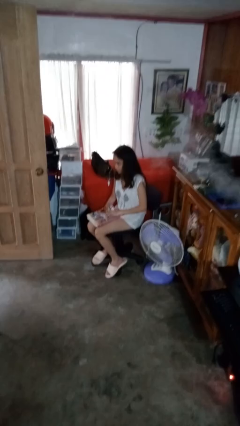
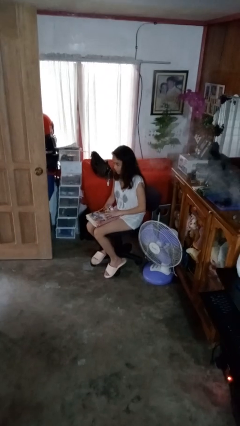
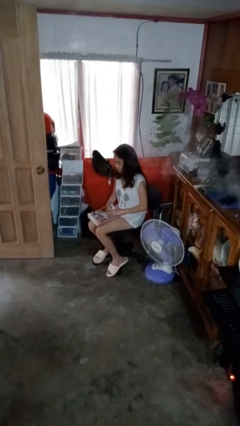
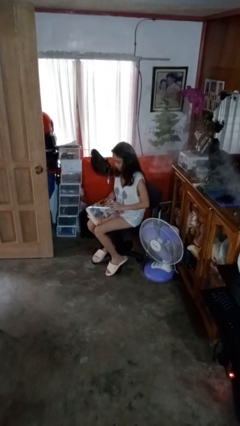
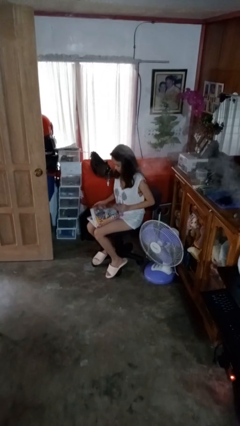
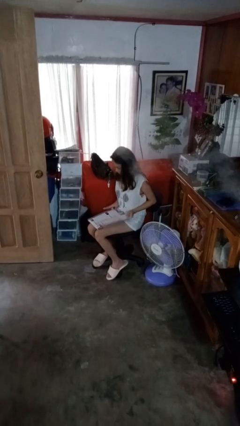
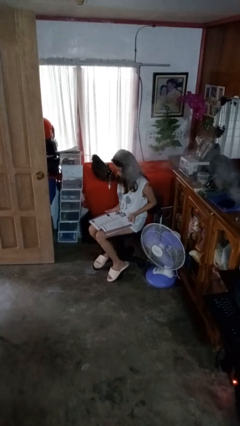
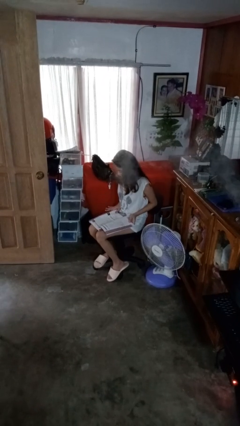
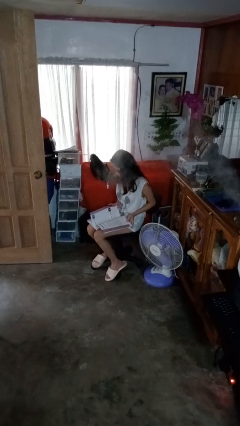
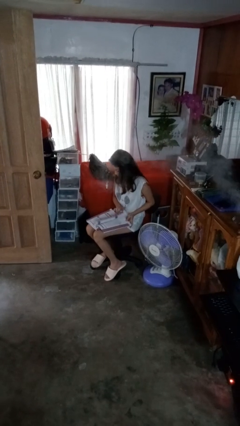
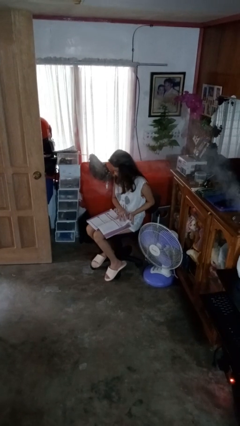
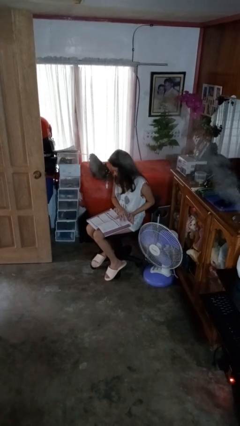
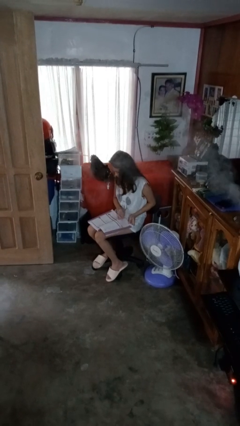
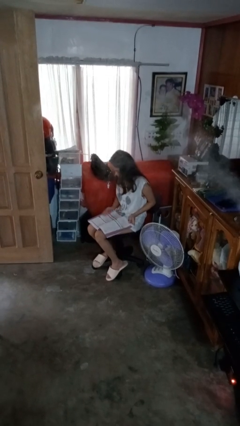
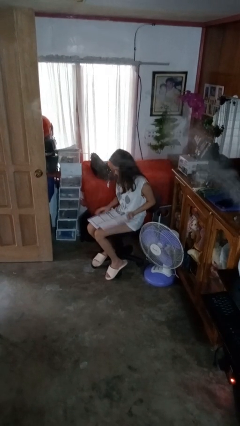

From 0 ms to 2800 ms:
person reads book

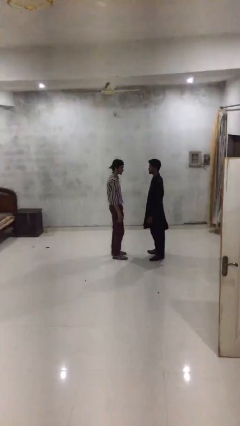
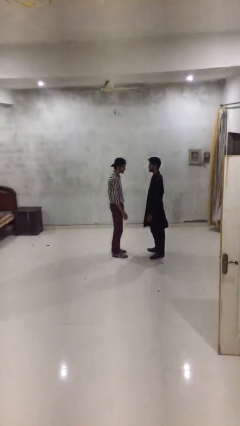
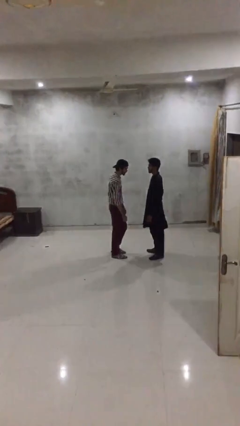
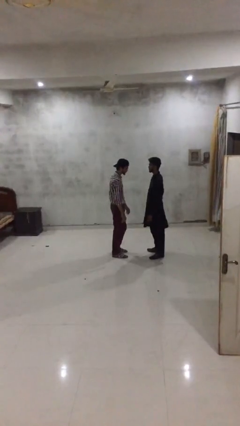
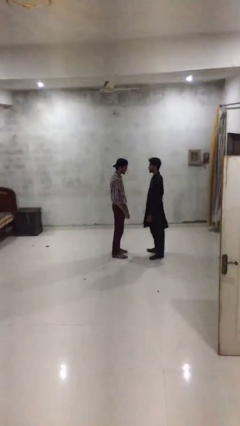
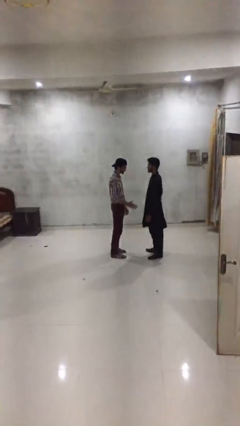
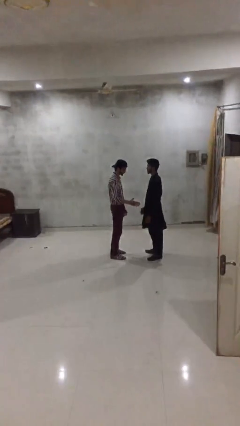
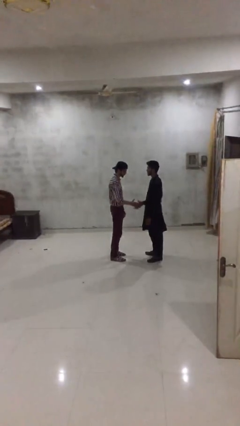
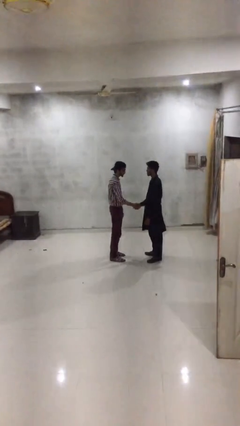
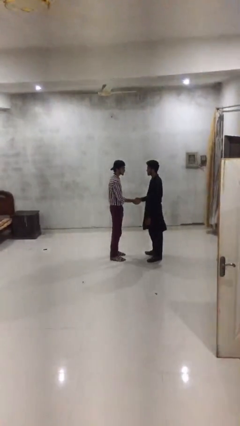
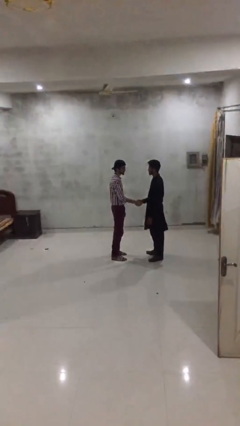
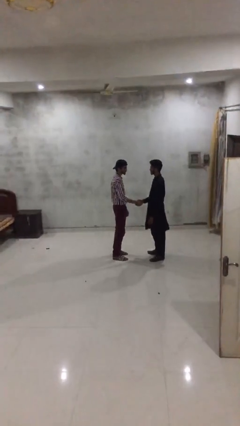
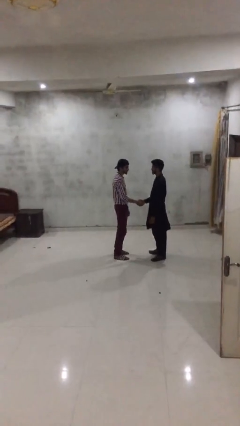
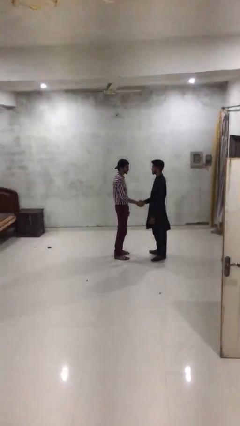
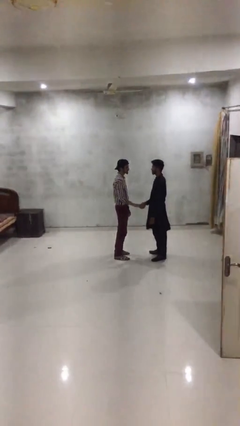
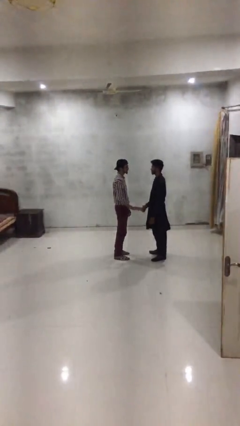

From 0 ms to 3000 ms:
person shakes hand

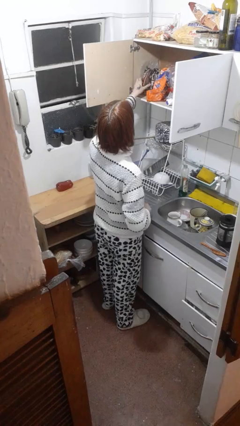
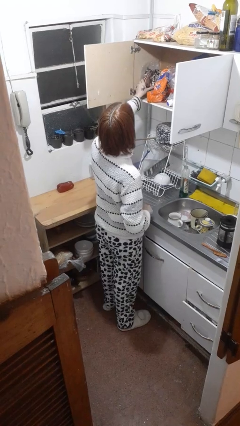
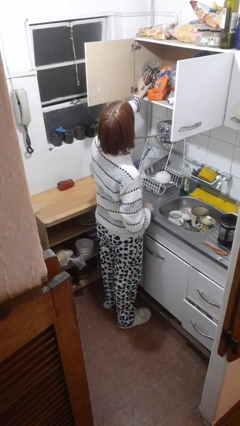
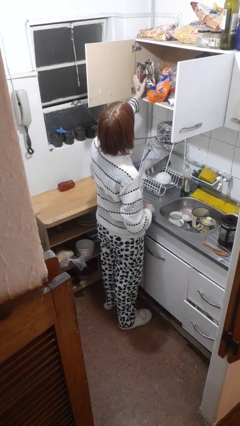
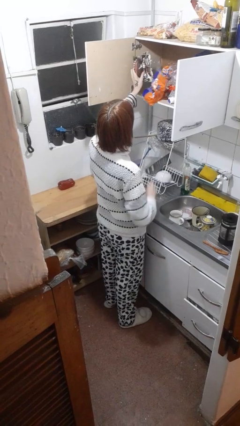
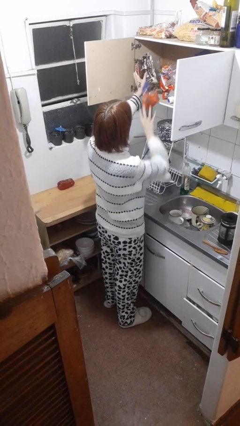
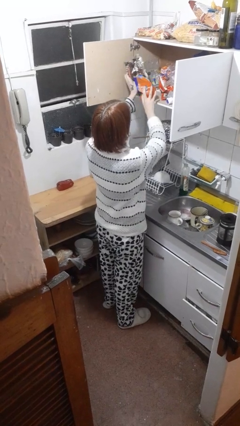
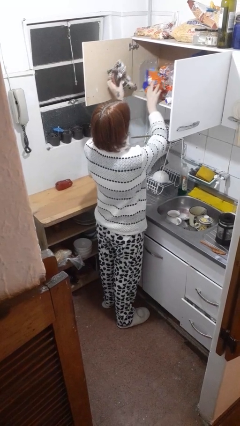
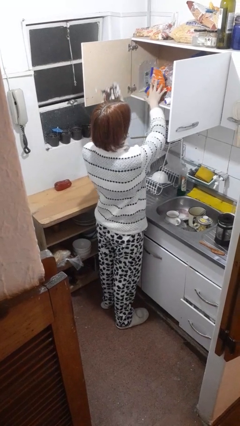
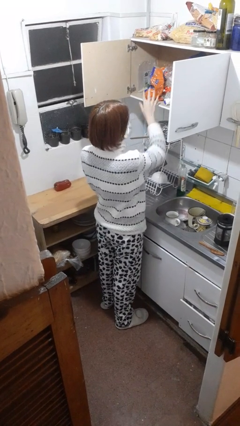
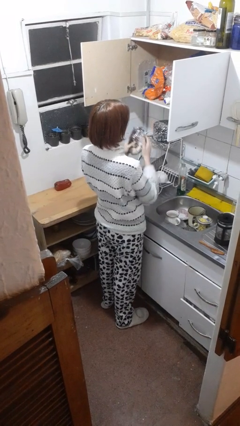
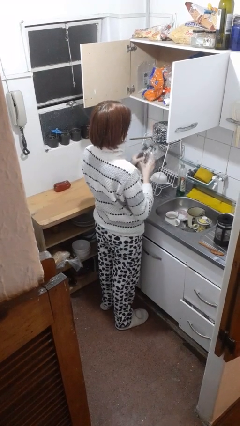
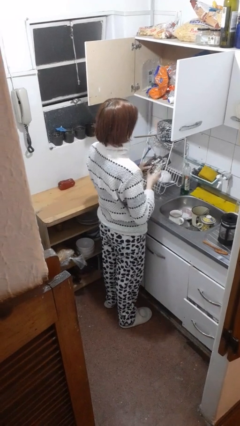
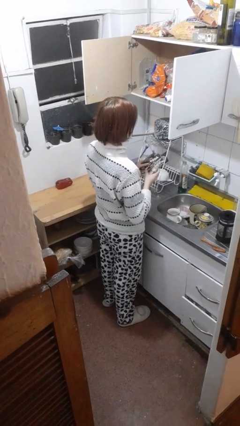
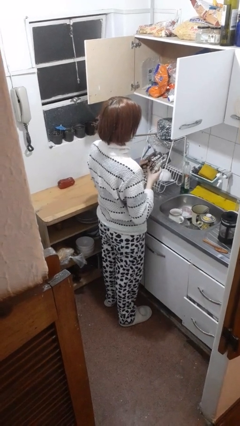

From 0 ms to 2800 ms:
person takes object from cabinet

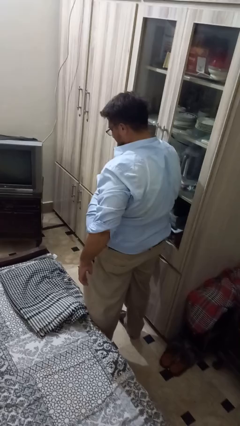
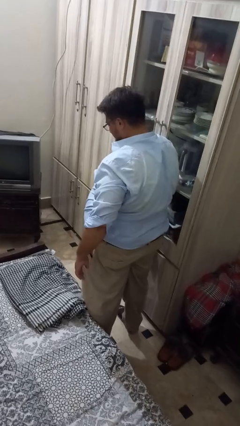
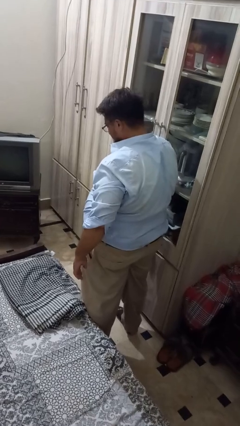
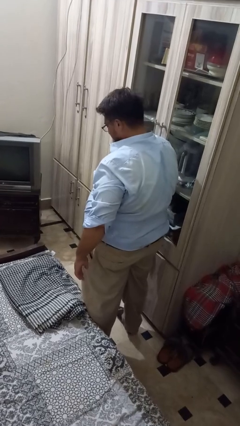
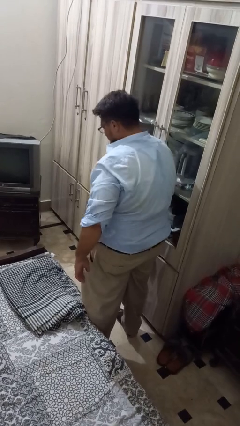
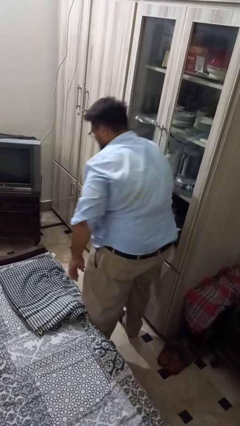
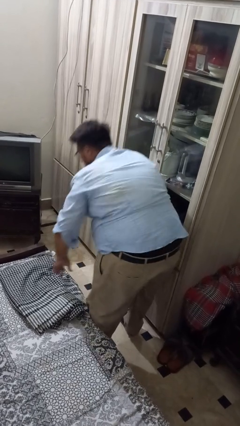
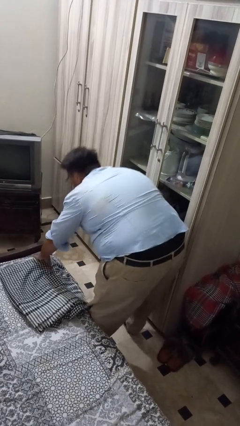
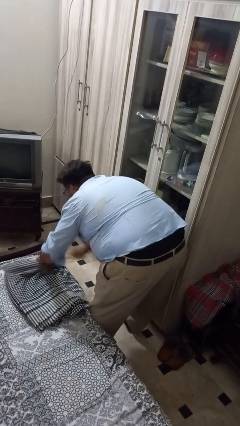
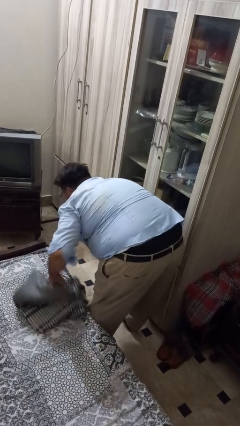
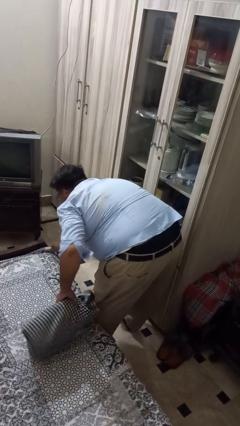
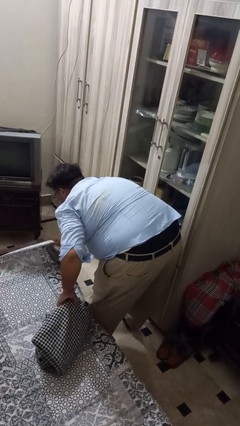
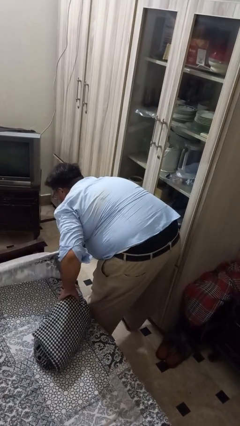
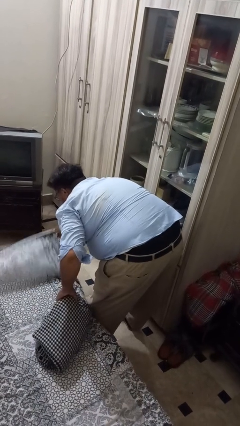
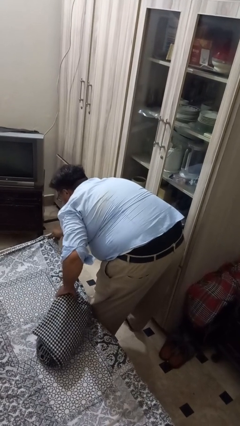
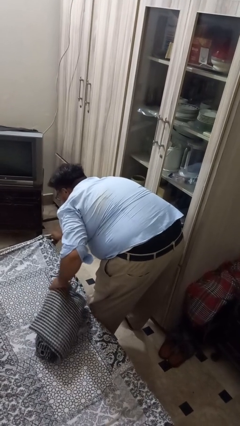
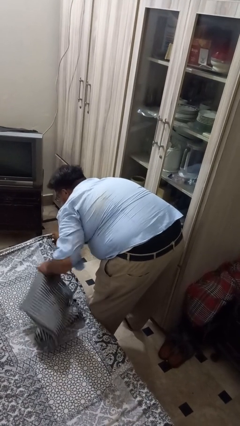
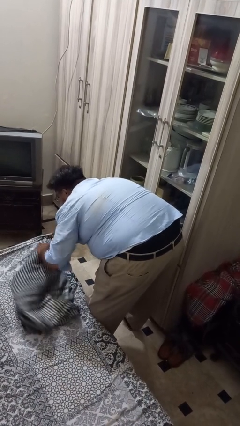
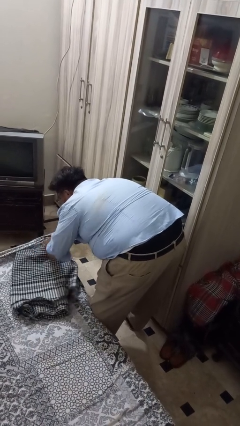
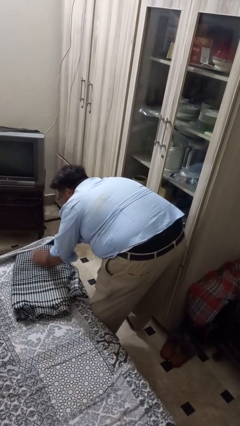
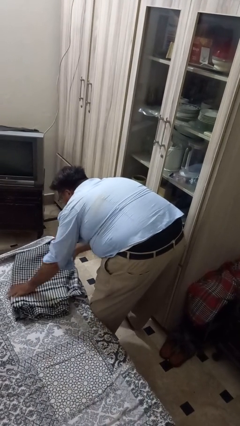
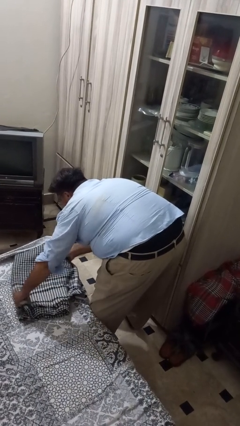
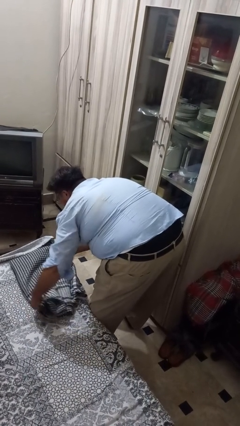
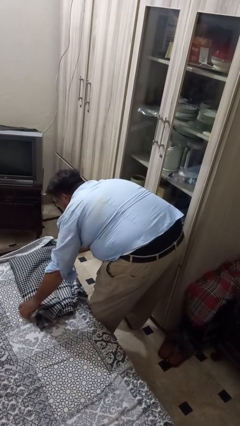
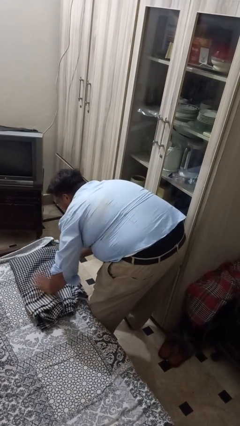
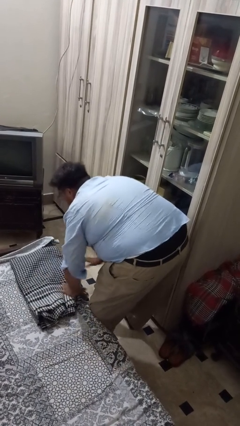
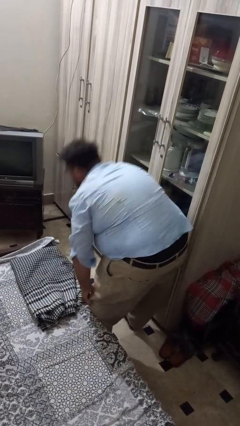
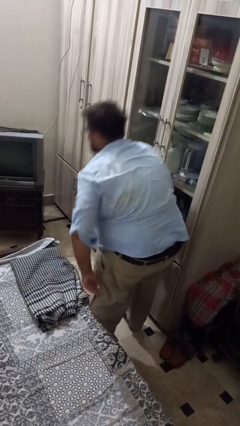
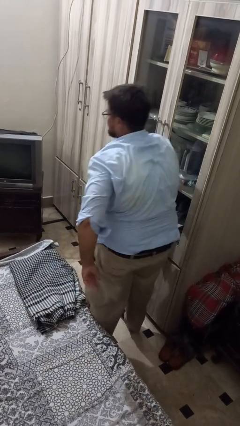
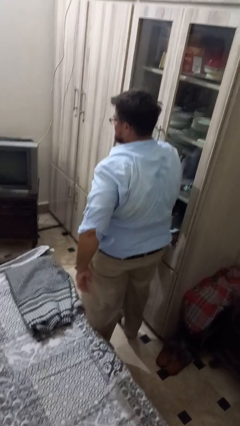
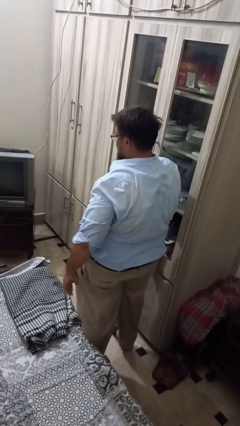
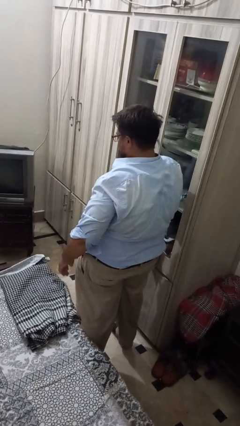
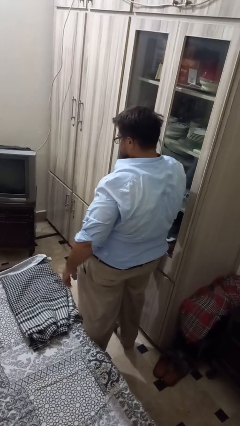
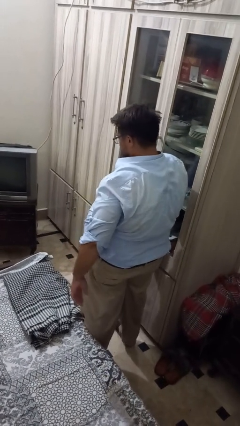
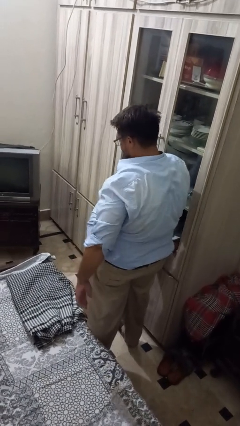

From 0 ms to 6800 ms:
person makes bed

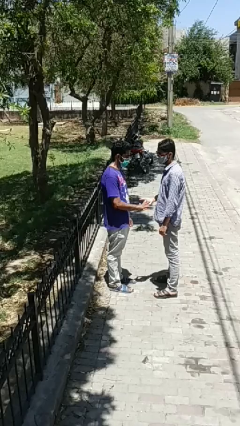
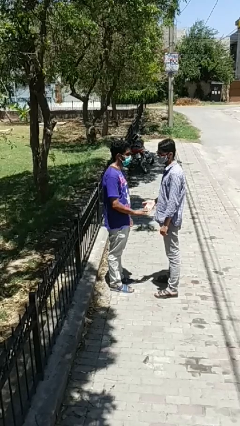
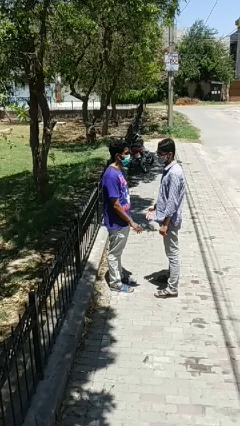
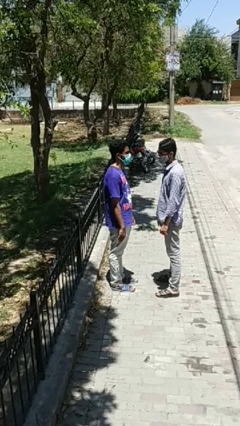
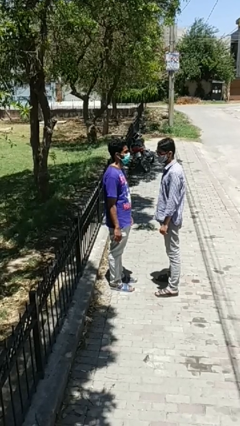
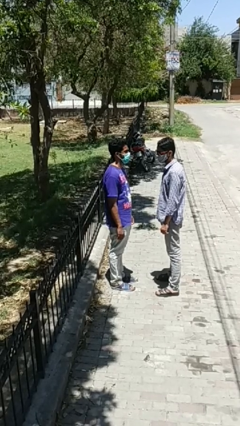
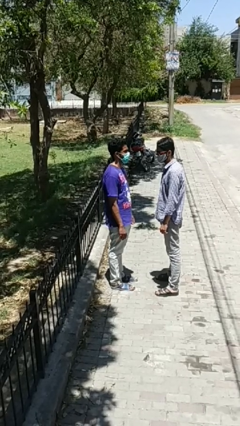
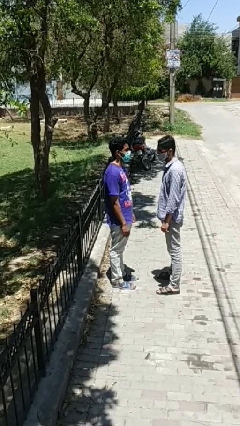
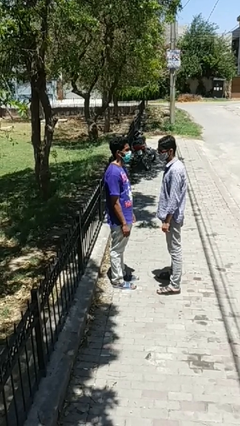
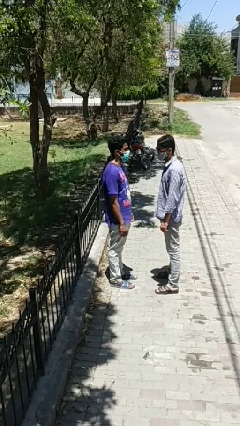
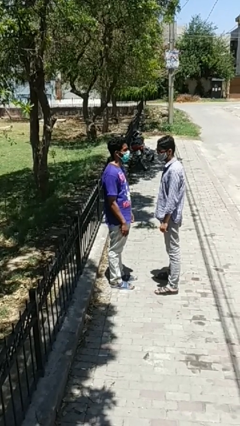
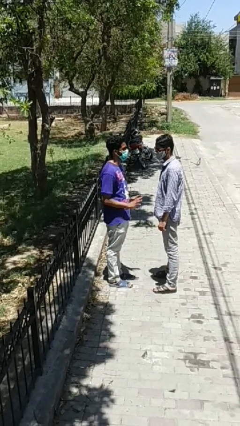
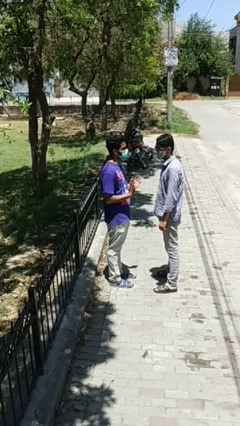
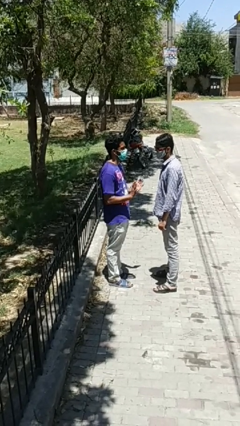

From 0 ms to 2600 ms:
person highfives hand
